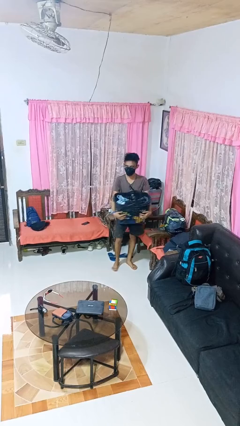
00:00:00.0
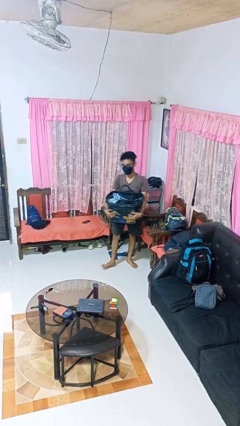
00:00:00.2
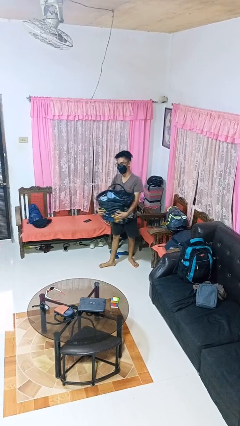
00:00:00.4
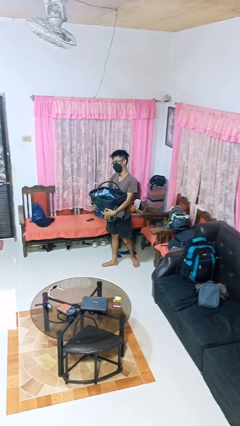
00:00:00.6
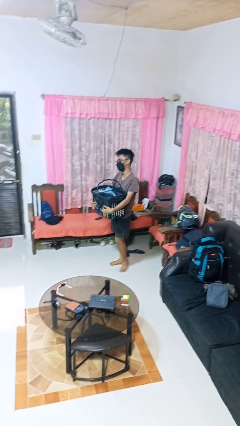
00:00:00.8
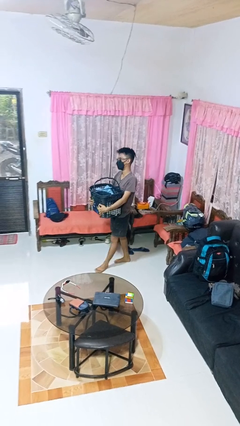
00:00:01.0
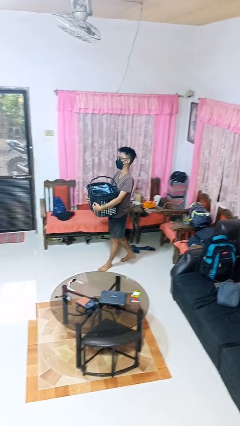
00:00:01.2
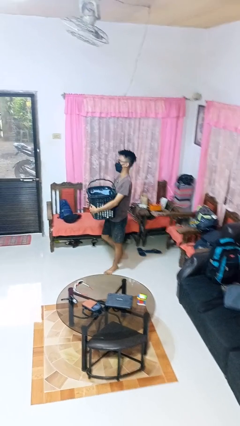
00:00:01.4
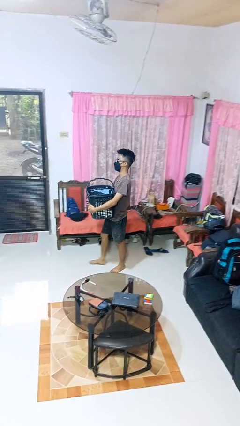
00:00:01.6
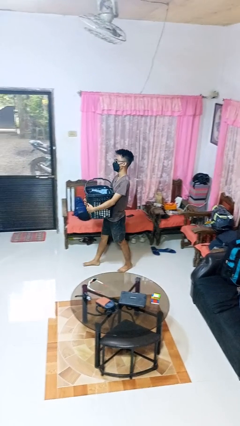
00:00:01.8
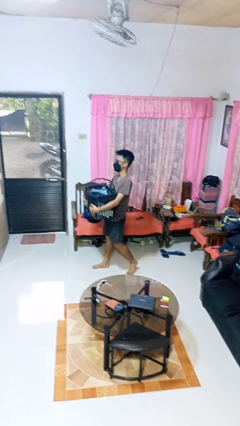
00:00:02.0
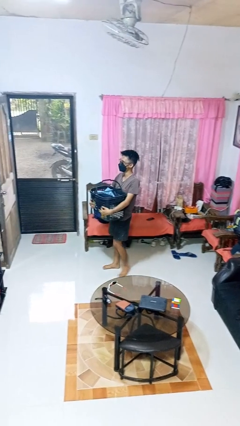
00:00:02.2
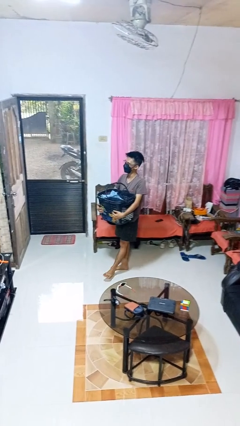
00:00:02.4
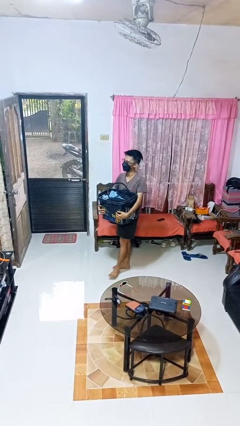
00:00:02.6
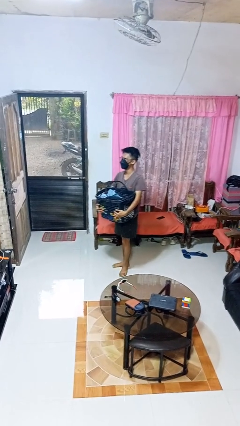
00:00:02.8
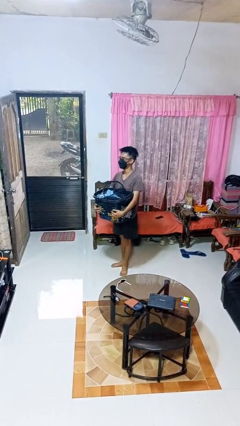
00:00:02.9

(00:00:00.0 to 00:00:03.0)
person carries laundry basket

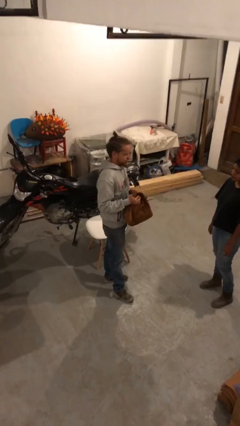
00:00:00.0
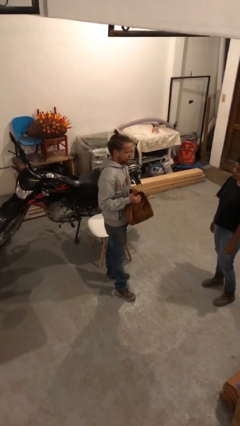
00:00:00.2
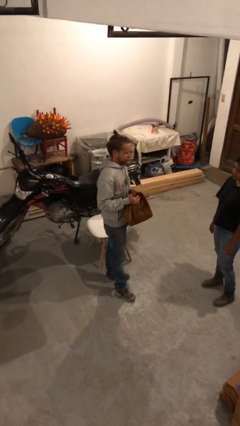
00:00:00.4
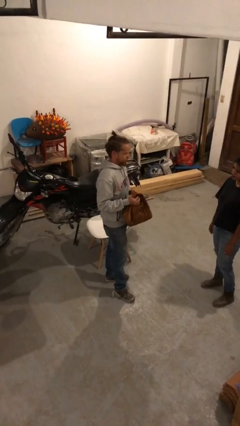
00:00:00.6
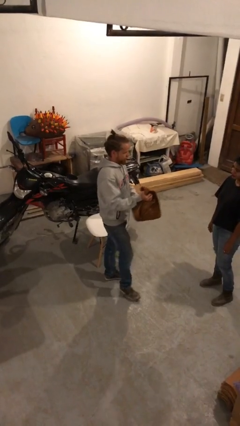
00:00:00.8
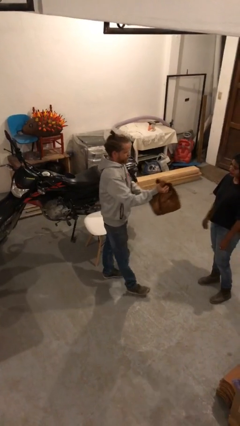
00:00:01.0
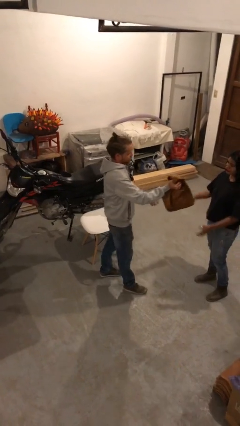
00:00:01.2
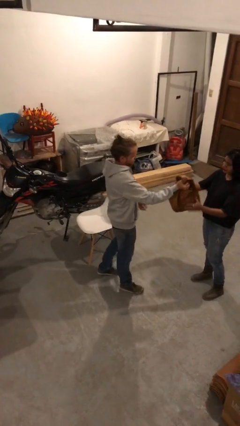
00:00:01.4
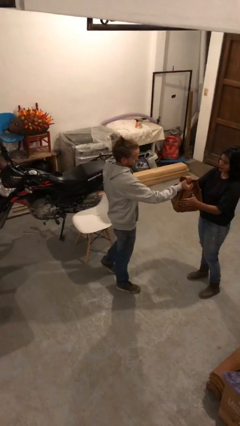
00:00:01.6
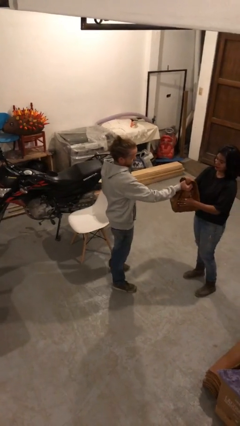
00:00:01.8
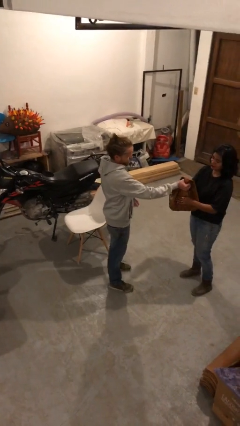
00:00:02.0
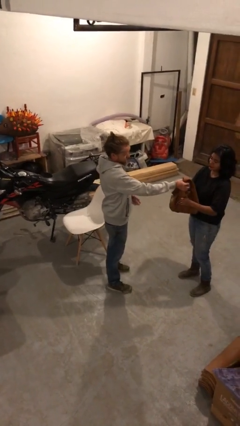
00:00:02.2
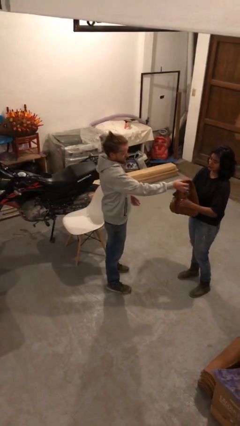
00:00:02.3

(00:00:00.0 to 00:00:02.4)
person transfers object to person

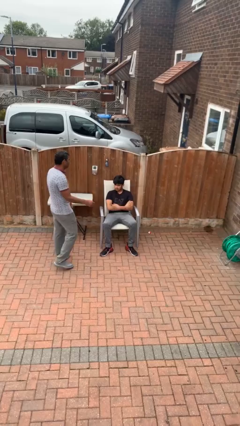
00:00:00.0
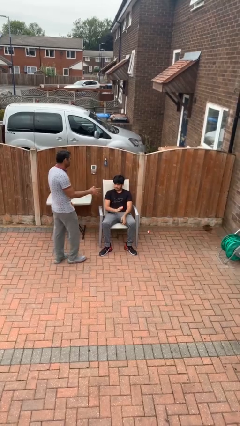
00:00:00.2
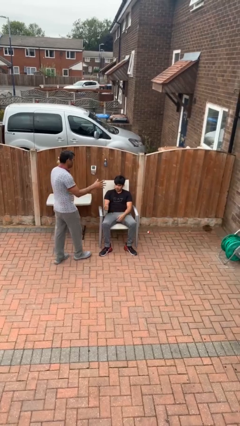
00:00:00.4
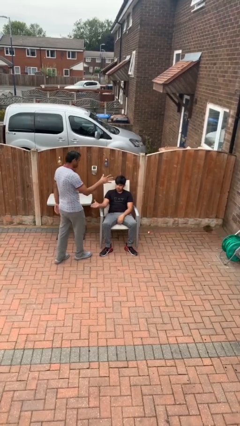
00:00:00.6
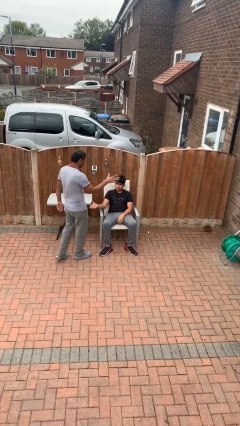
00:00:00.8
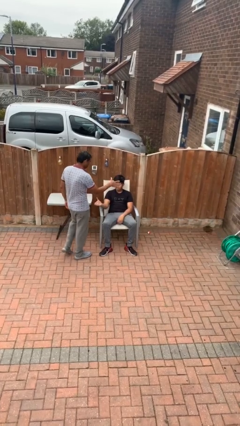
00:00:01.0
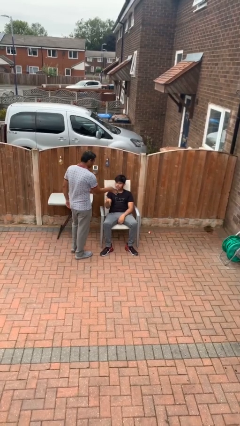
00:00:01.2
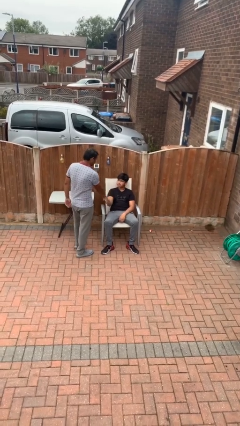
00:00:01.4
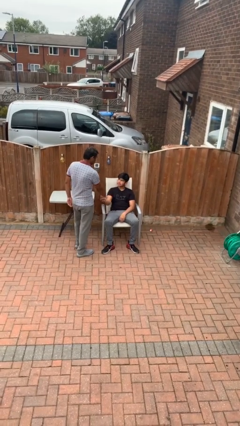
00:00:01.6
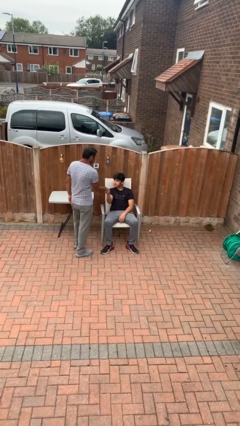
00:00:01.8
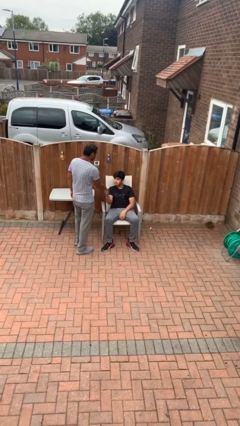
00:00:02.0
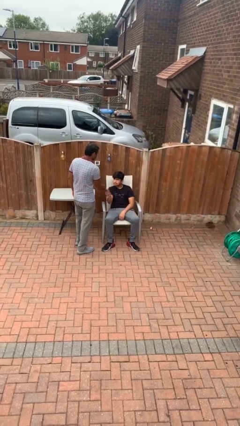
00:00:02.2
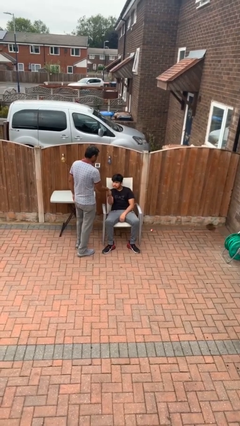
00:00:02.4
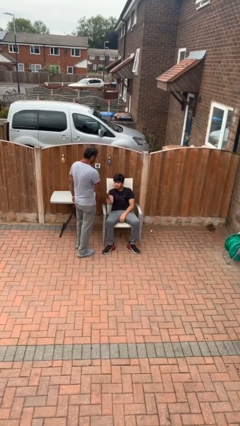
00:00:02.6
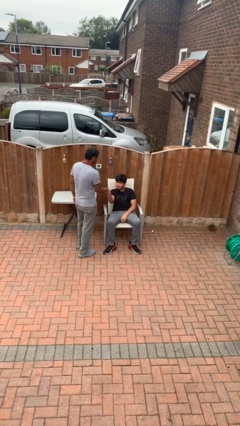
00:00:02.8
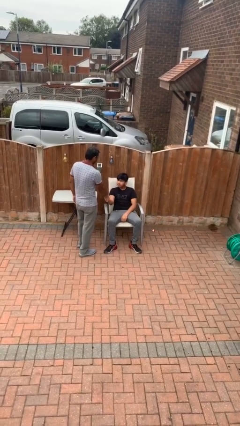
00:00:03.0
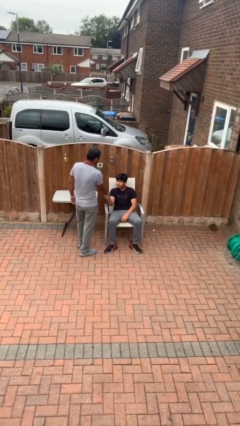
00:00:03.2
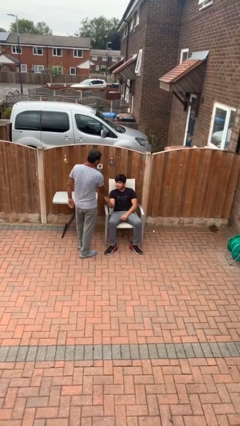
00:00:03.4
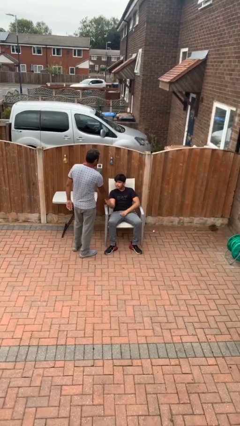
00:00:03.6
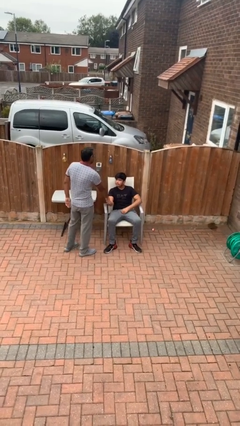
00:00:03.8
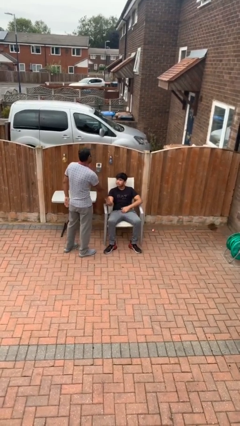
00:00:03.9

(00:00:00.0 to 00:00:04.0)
person shakes hand

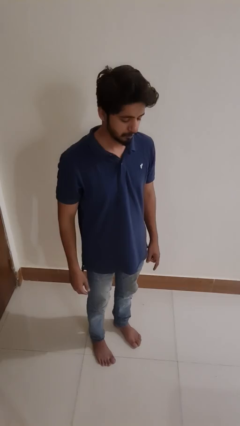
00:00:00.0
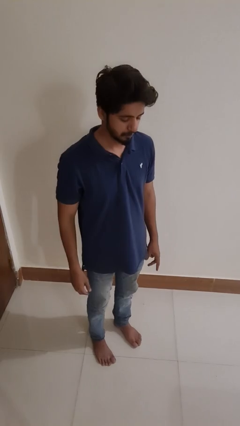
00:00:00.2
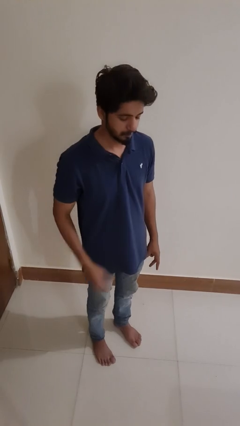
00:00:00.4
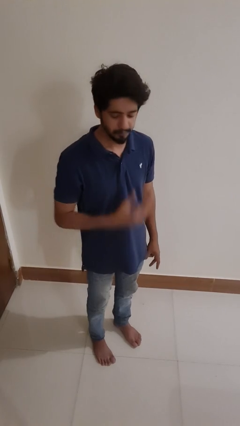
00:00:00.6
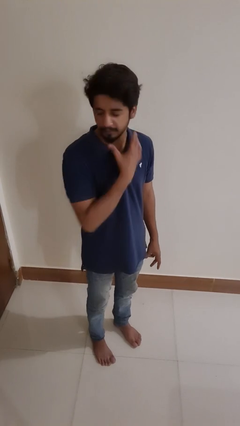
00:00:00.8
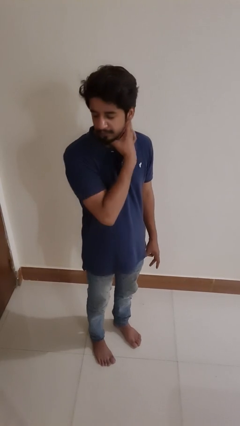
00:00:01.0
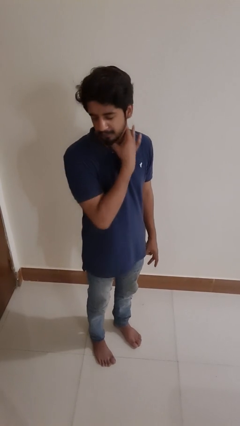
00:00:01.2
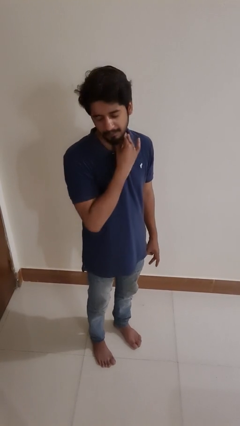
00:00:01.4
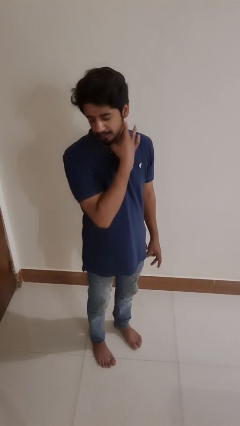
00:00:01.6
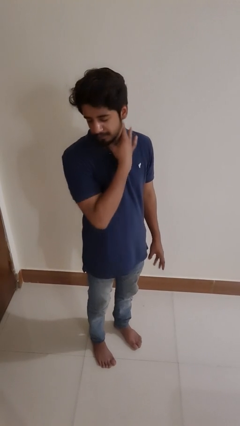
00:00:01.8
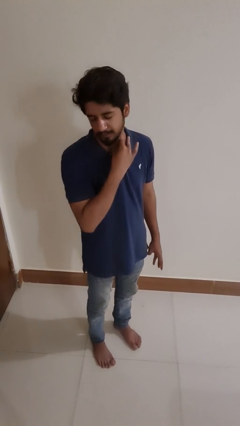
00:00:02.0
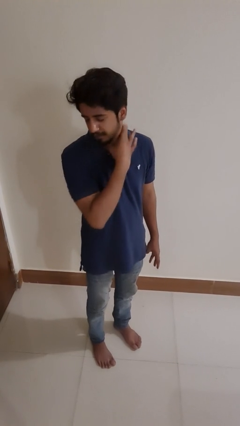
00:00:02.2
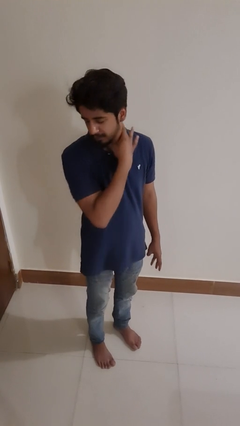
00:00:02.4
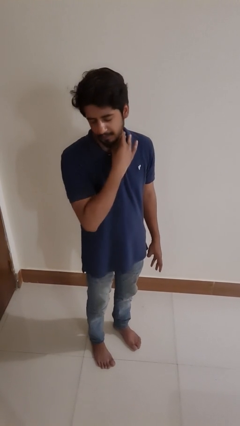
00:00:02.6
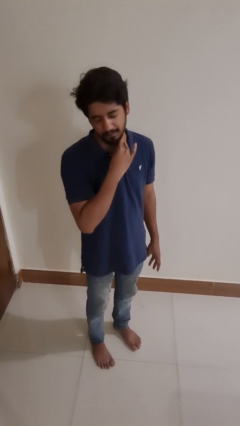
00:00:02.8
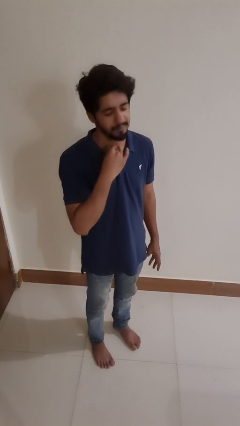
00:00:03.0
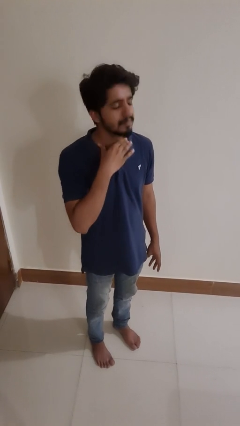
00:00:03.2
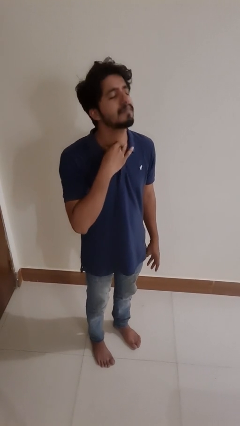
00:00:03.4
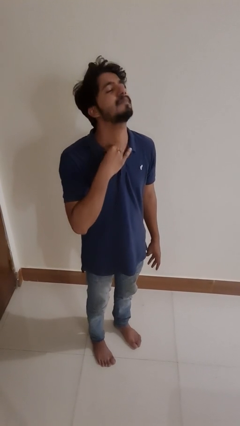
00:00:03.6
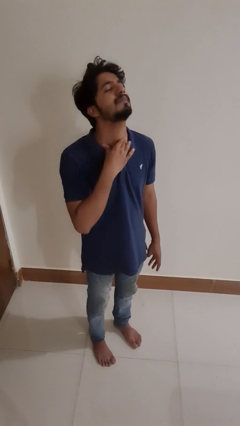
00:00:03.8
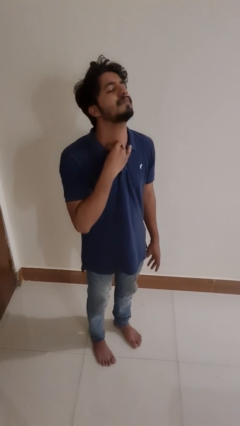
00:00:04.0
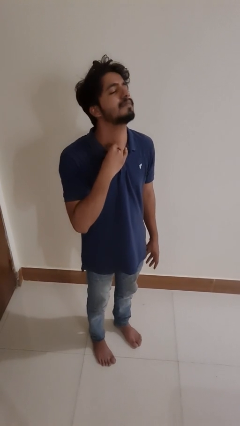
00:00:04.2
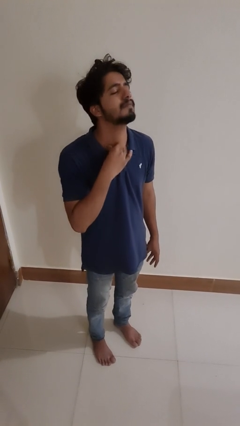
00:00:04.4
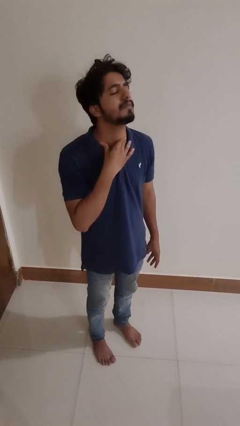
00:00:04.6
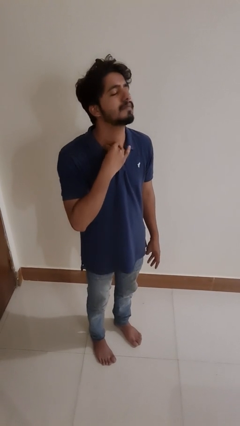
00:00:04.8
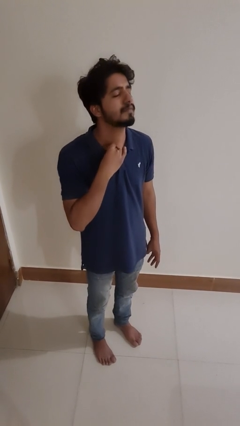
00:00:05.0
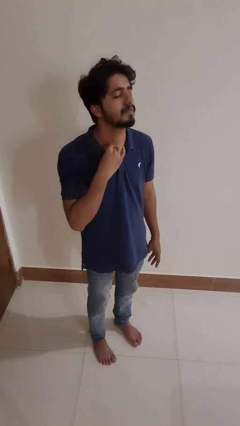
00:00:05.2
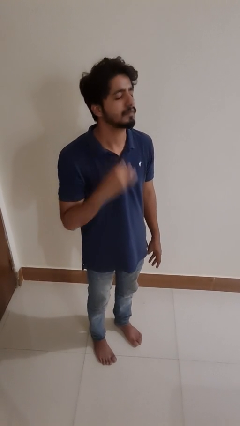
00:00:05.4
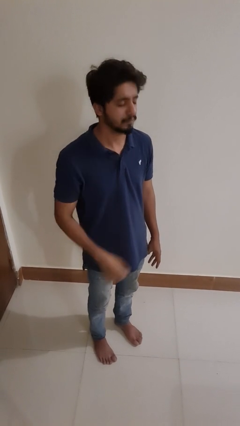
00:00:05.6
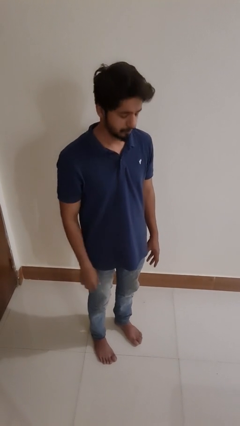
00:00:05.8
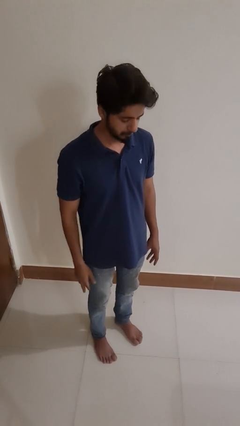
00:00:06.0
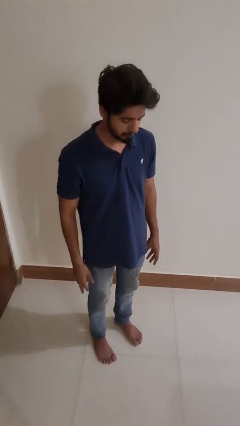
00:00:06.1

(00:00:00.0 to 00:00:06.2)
person rubs neck

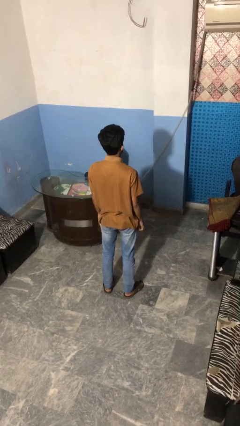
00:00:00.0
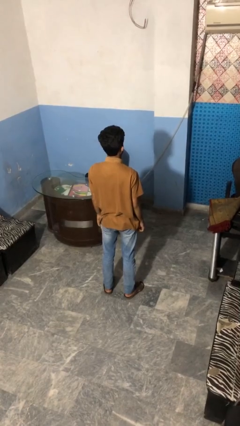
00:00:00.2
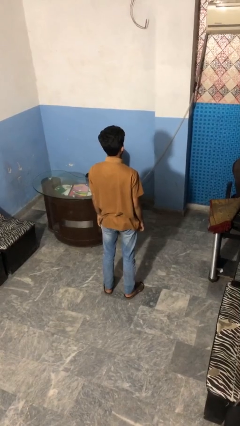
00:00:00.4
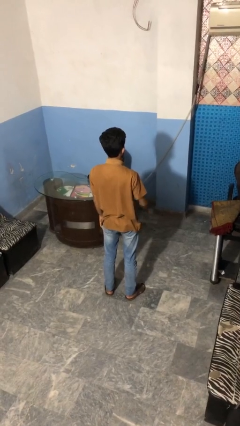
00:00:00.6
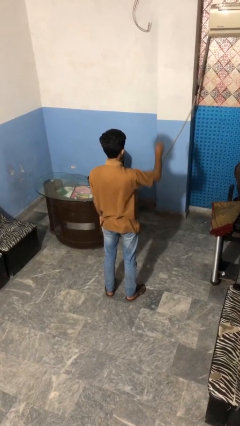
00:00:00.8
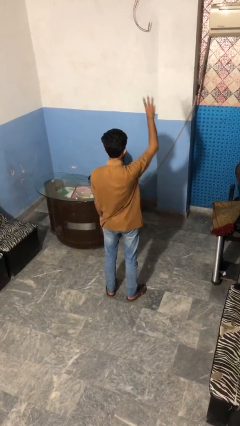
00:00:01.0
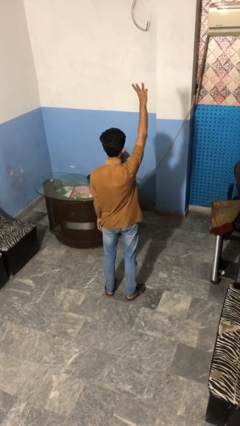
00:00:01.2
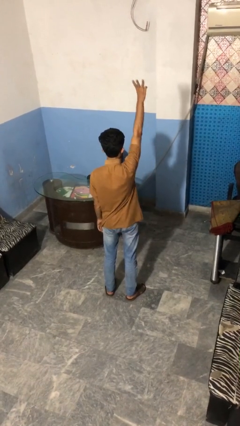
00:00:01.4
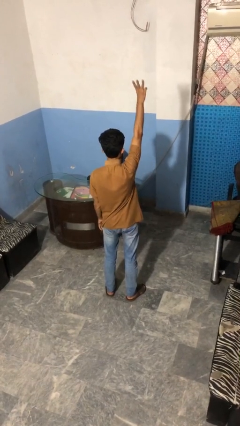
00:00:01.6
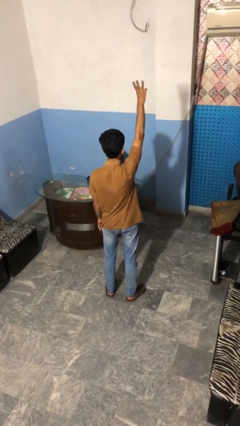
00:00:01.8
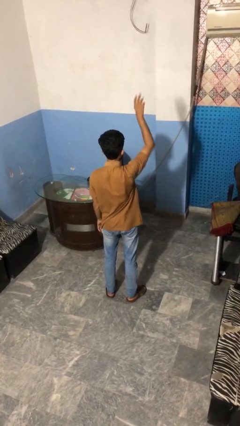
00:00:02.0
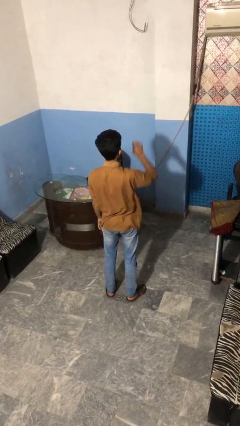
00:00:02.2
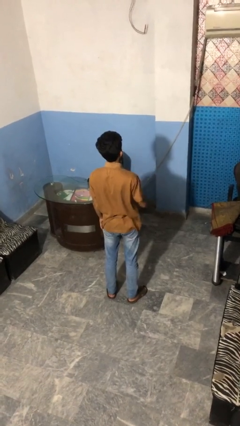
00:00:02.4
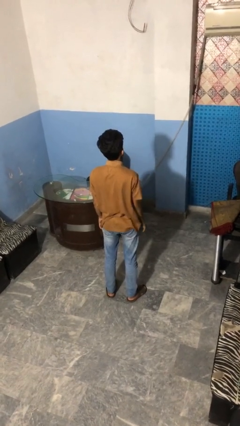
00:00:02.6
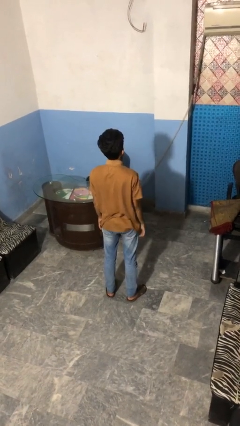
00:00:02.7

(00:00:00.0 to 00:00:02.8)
person gestures number three
